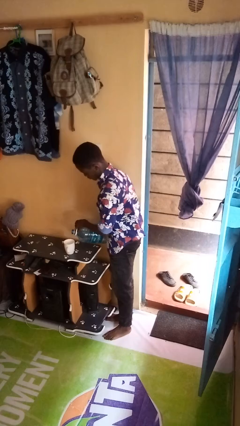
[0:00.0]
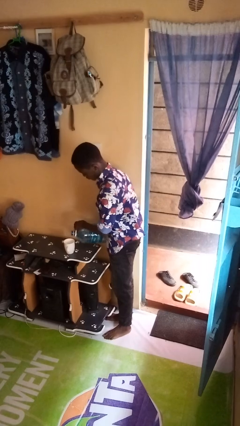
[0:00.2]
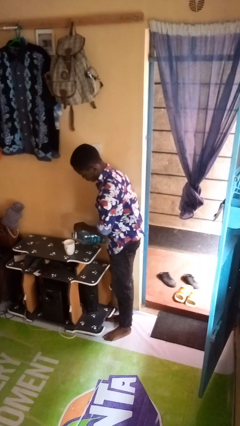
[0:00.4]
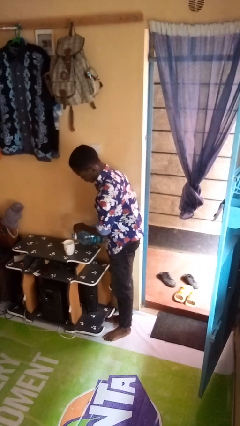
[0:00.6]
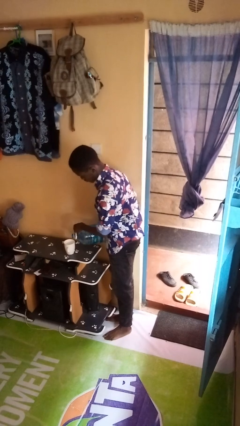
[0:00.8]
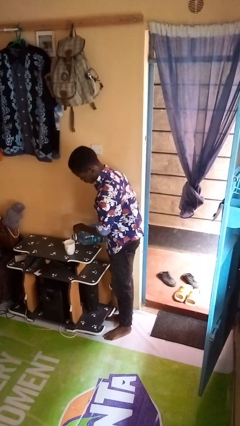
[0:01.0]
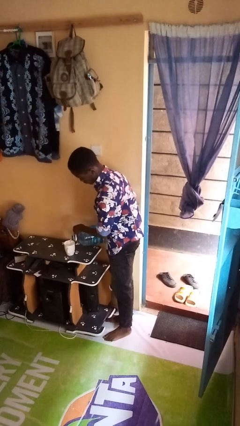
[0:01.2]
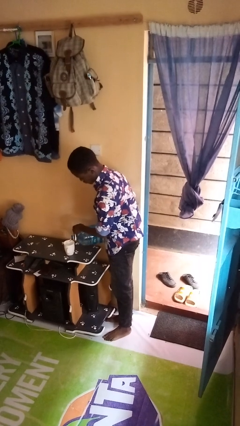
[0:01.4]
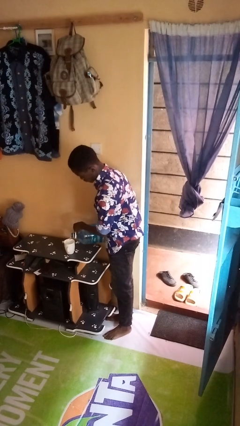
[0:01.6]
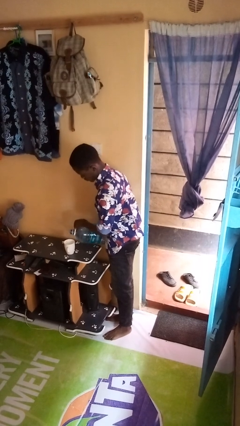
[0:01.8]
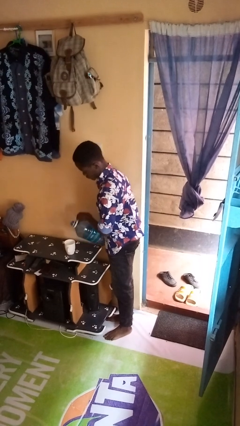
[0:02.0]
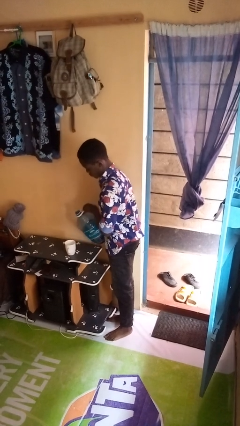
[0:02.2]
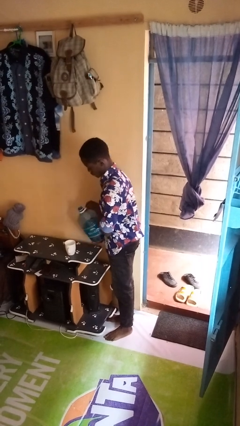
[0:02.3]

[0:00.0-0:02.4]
person pours liquid into cup

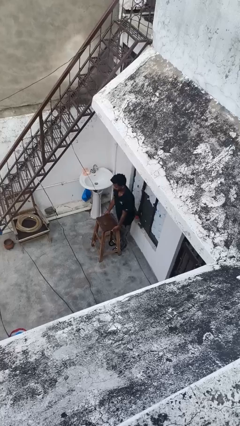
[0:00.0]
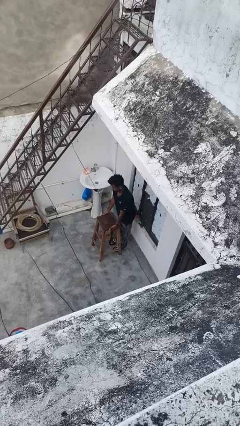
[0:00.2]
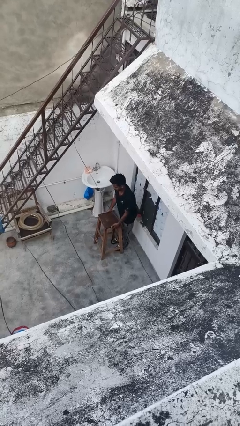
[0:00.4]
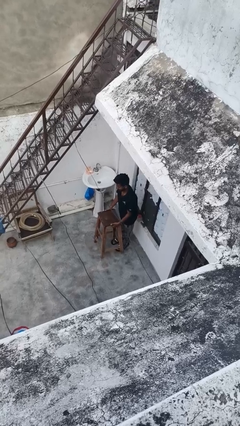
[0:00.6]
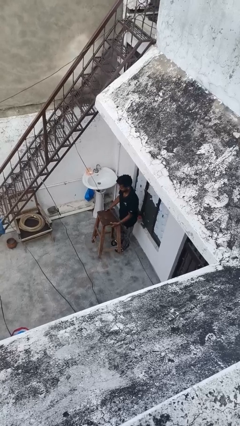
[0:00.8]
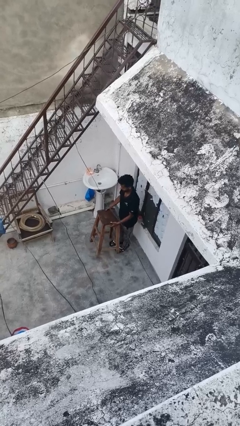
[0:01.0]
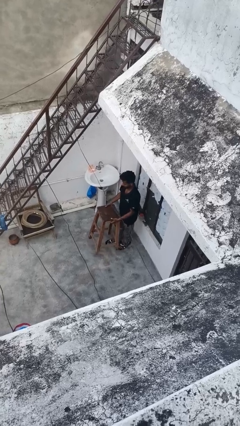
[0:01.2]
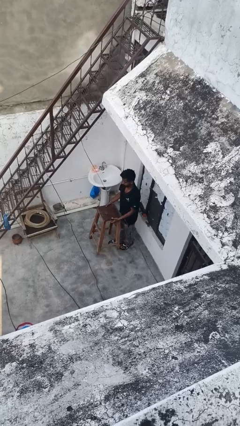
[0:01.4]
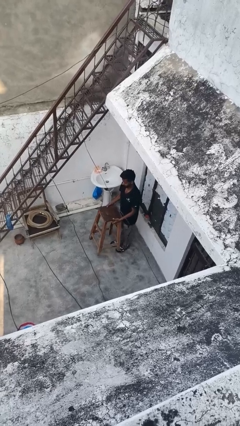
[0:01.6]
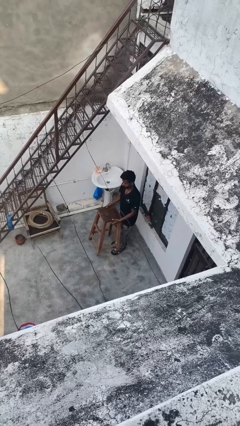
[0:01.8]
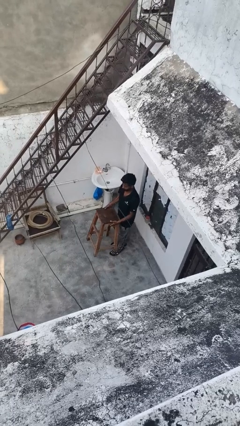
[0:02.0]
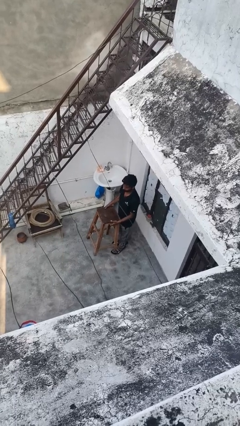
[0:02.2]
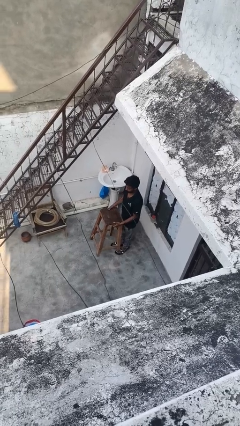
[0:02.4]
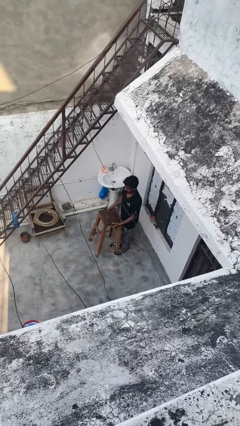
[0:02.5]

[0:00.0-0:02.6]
person carries furniture

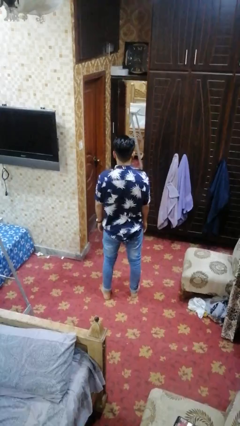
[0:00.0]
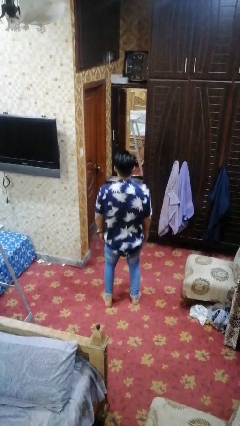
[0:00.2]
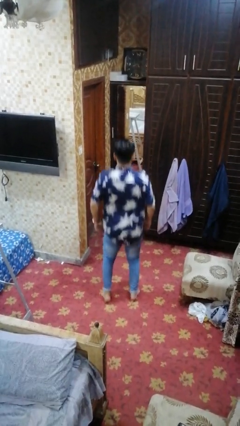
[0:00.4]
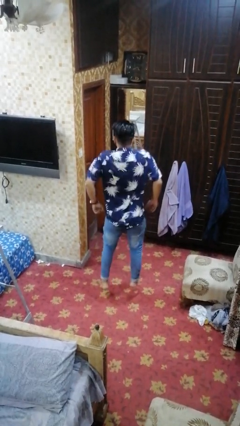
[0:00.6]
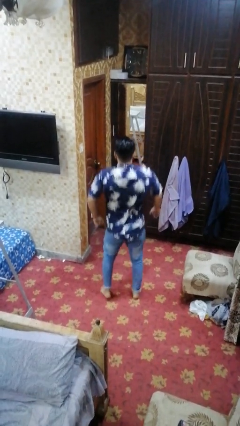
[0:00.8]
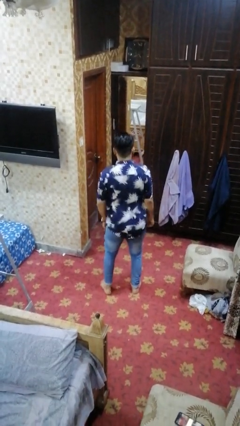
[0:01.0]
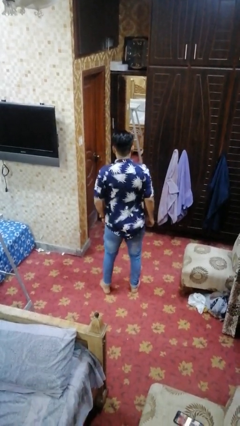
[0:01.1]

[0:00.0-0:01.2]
person jumps

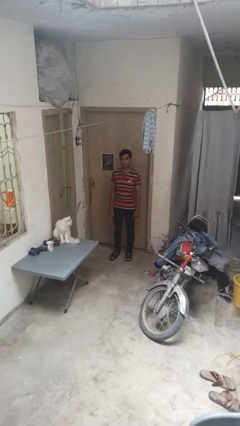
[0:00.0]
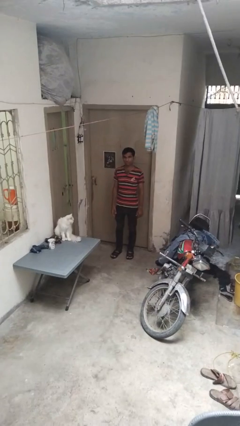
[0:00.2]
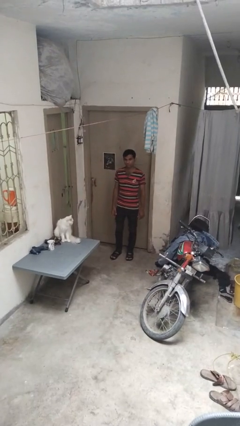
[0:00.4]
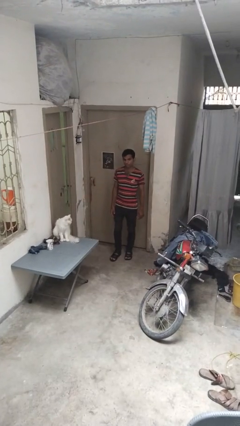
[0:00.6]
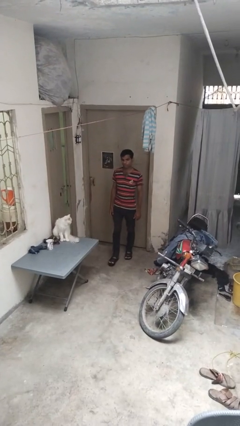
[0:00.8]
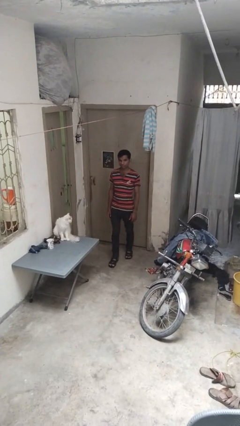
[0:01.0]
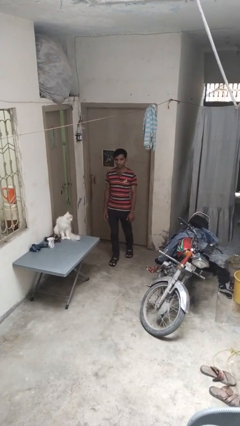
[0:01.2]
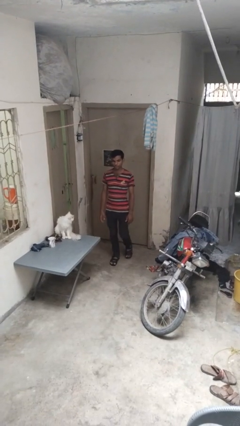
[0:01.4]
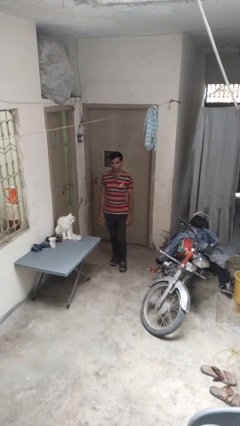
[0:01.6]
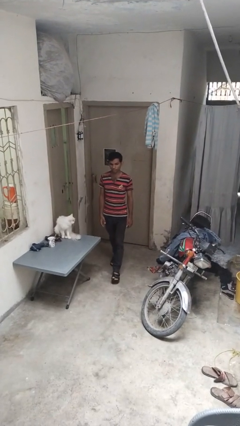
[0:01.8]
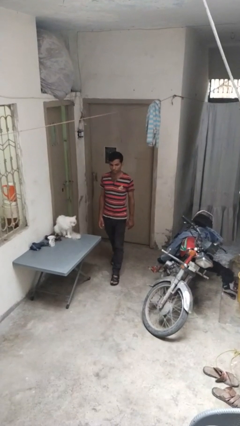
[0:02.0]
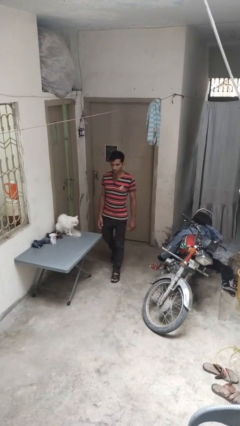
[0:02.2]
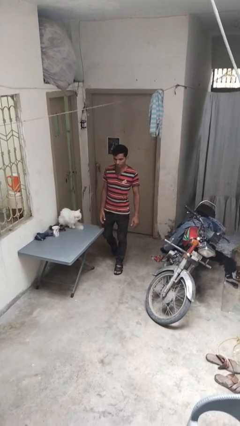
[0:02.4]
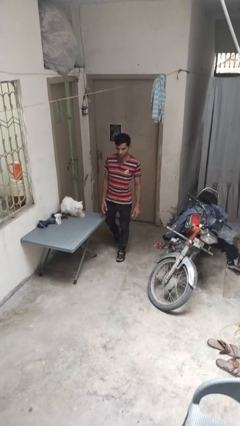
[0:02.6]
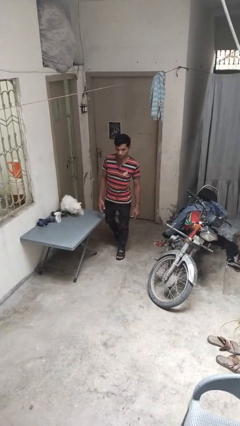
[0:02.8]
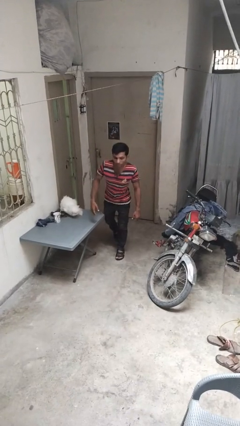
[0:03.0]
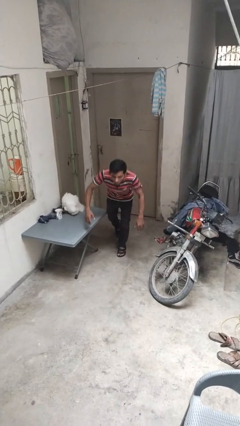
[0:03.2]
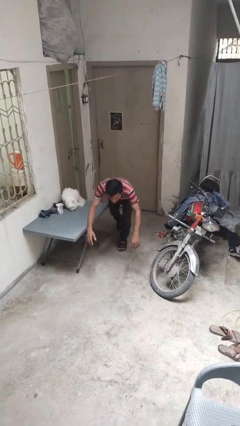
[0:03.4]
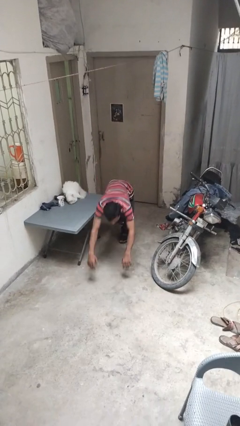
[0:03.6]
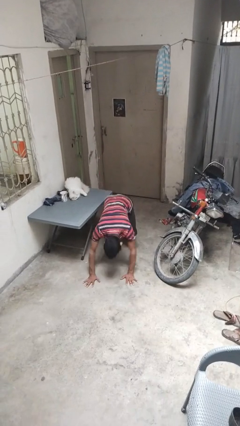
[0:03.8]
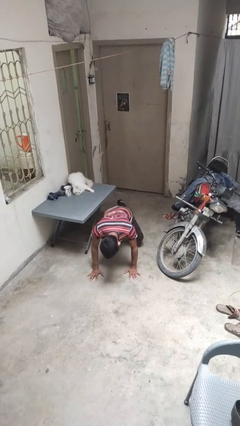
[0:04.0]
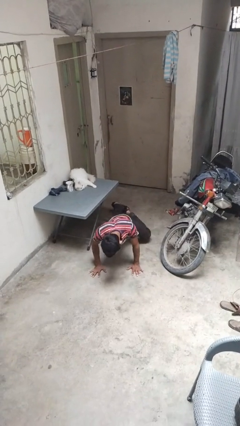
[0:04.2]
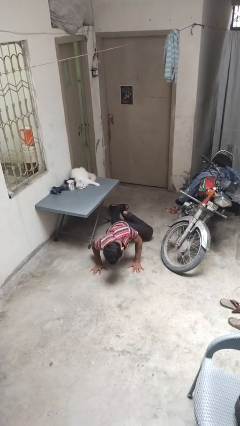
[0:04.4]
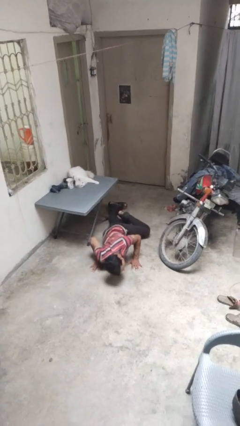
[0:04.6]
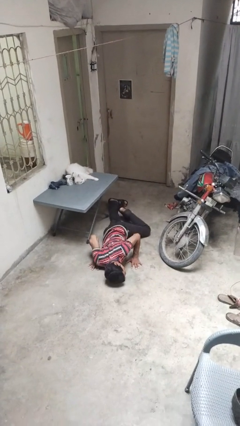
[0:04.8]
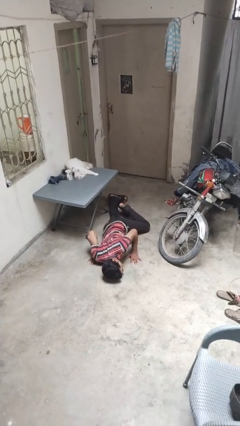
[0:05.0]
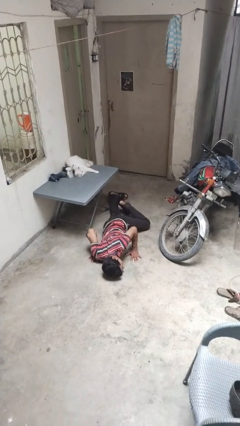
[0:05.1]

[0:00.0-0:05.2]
person trips on object on floor

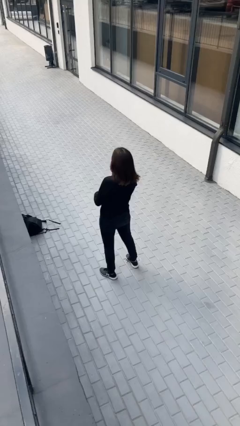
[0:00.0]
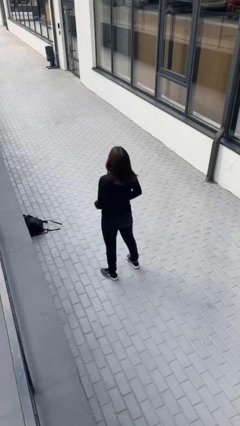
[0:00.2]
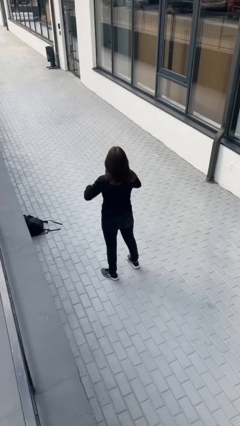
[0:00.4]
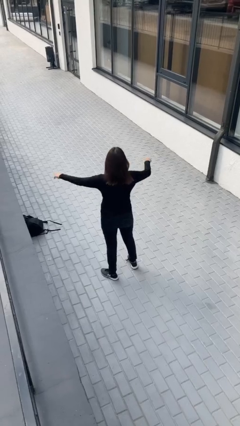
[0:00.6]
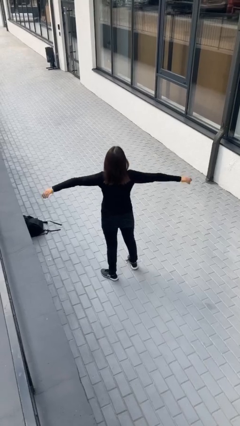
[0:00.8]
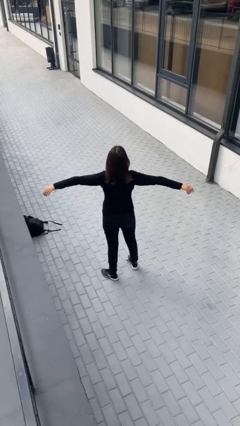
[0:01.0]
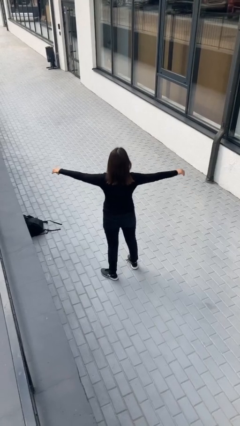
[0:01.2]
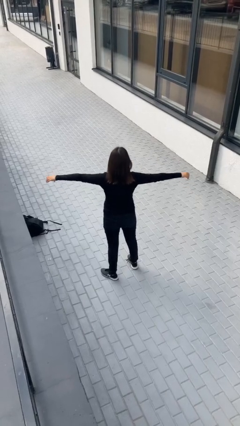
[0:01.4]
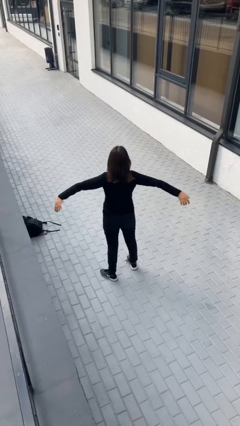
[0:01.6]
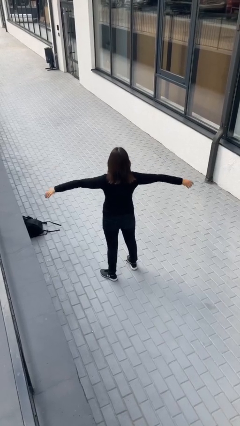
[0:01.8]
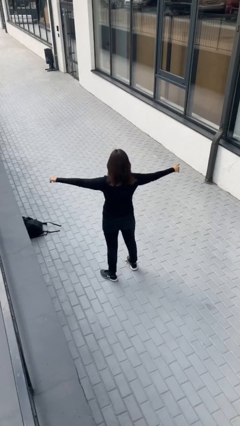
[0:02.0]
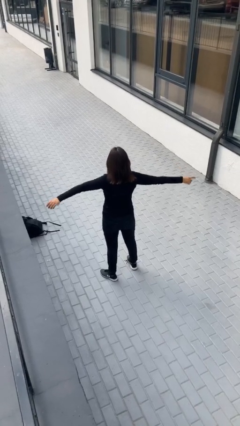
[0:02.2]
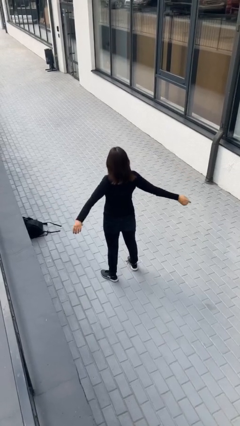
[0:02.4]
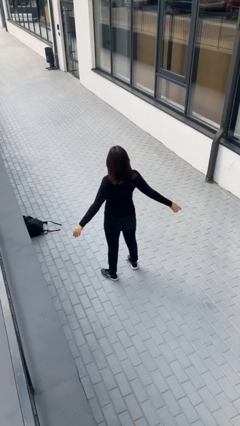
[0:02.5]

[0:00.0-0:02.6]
person stretches arms to side

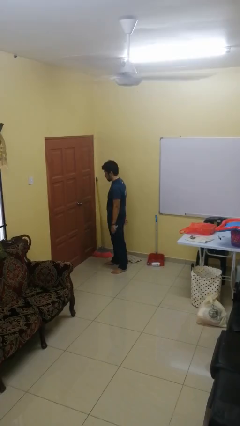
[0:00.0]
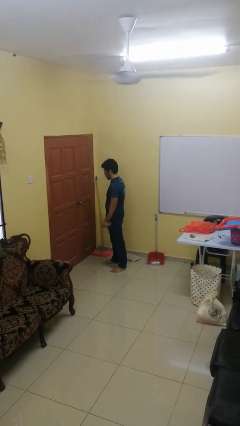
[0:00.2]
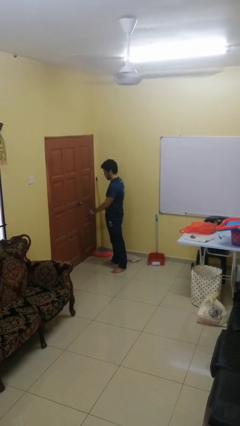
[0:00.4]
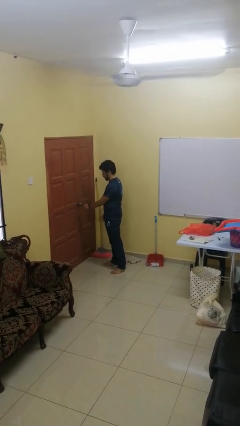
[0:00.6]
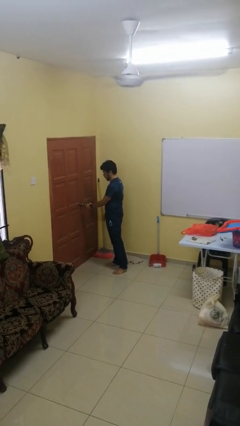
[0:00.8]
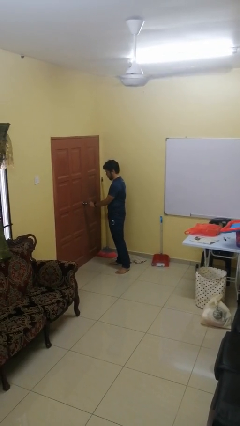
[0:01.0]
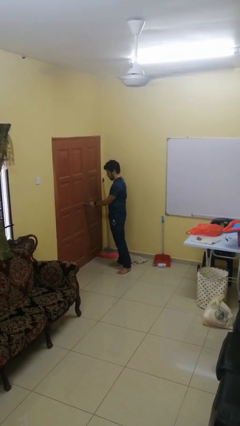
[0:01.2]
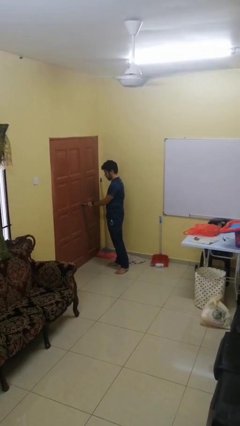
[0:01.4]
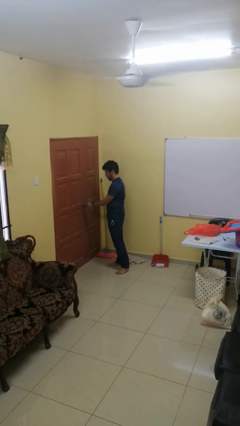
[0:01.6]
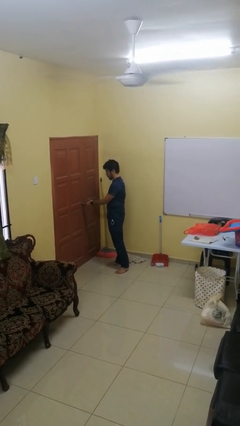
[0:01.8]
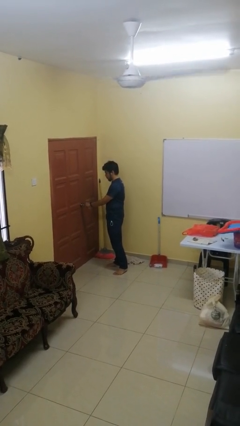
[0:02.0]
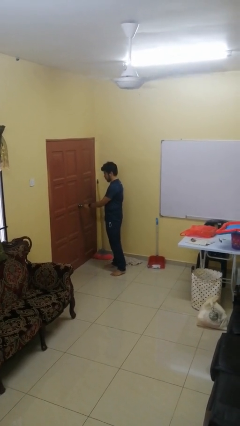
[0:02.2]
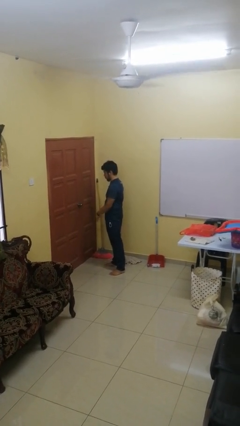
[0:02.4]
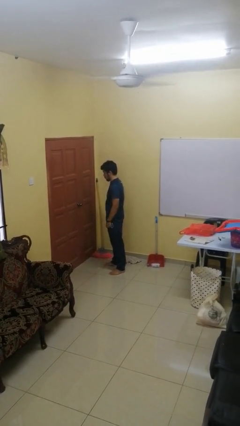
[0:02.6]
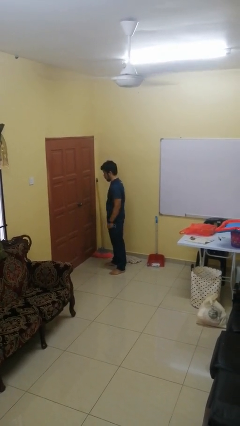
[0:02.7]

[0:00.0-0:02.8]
person locks door with keys

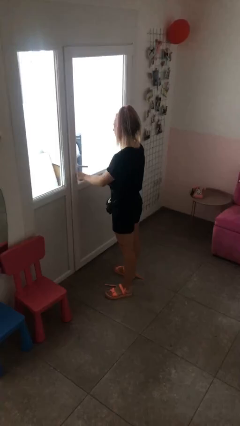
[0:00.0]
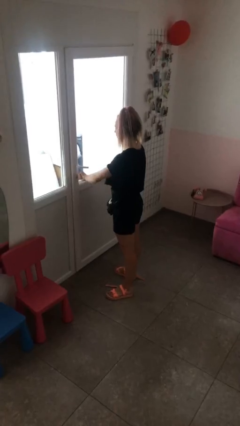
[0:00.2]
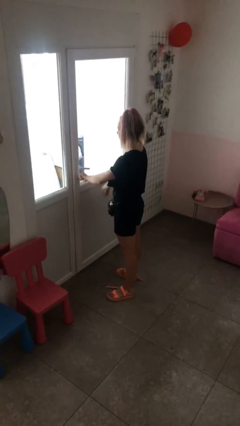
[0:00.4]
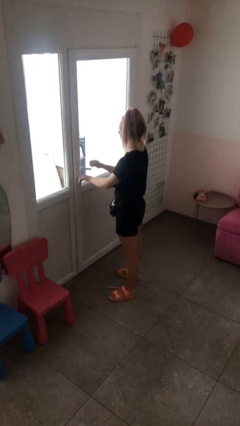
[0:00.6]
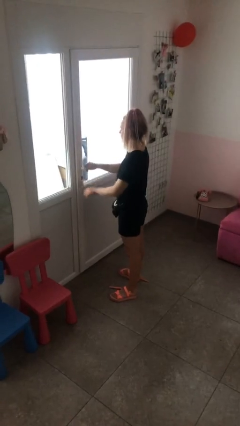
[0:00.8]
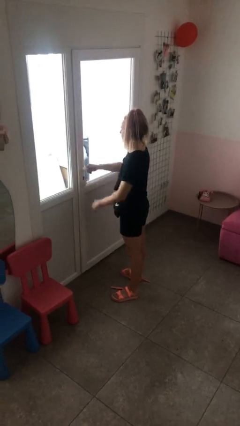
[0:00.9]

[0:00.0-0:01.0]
person unlocks door with keys
